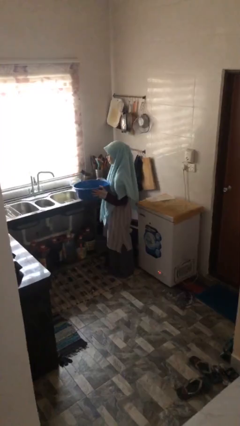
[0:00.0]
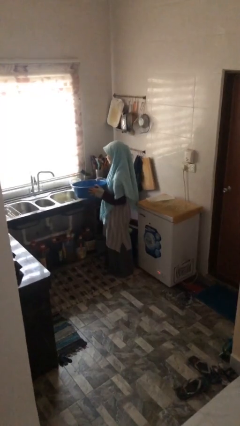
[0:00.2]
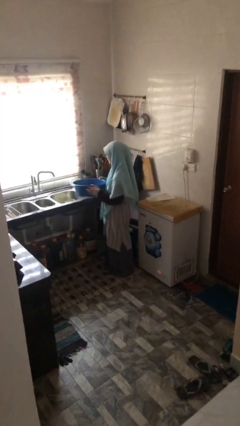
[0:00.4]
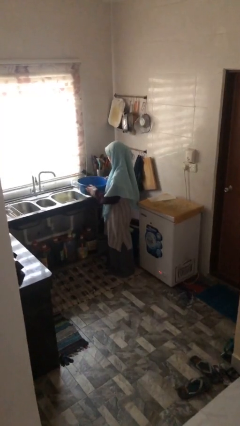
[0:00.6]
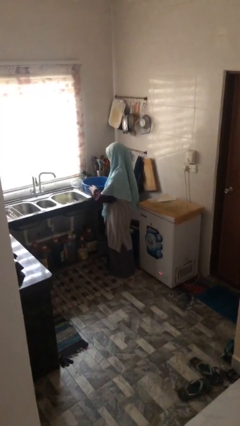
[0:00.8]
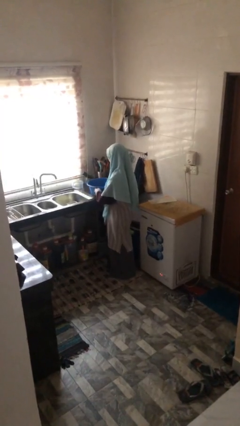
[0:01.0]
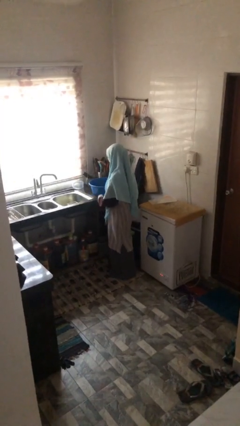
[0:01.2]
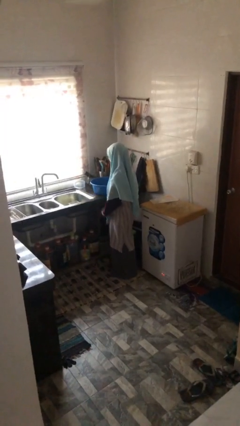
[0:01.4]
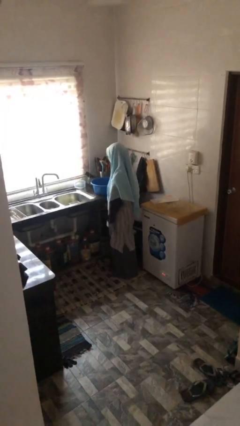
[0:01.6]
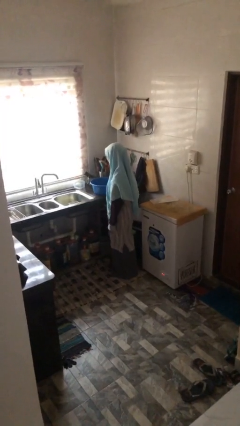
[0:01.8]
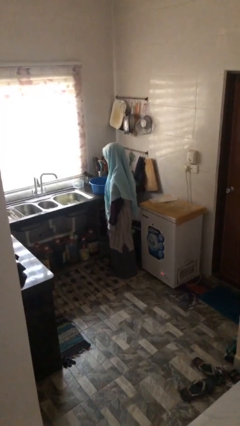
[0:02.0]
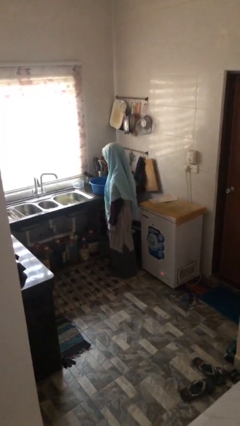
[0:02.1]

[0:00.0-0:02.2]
person puts down object on countertop

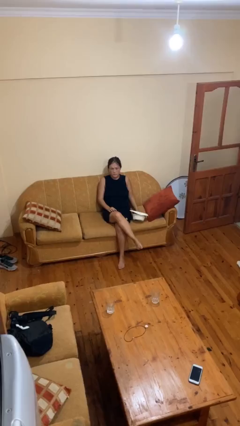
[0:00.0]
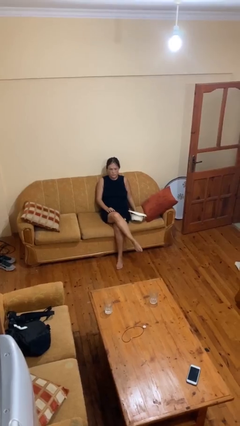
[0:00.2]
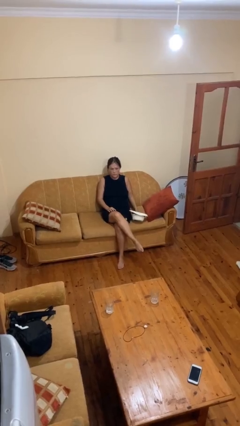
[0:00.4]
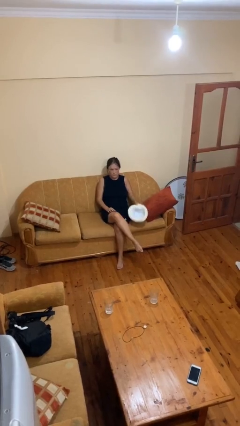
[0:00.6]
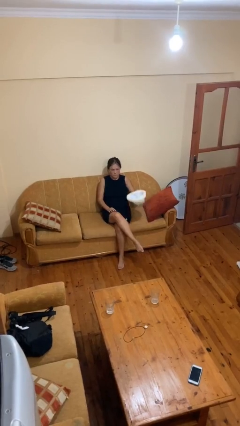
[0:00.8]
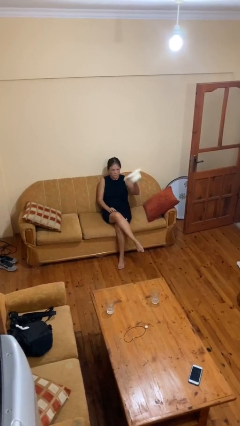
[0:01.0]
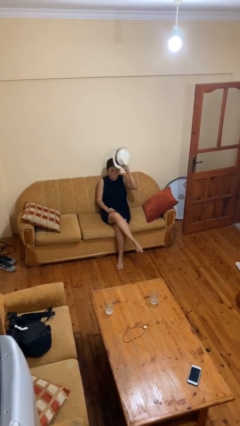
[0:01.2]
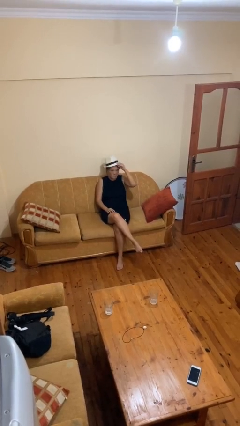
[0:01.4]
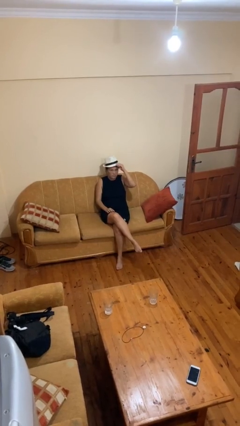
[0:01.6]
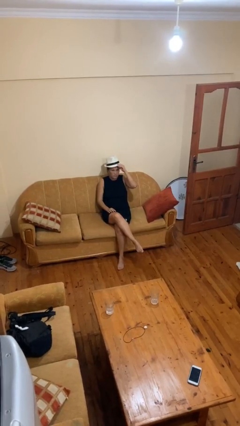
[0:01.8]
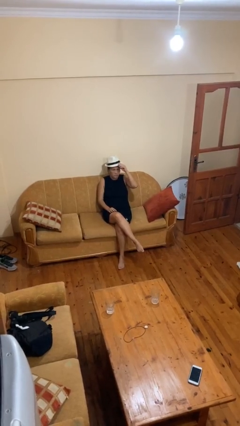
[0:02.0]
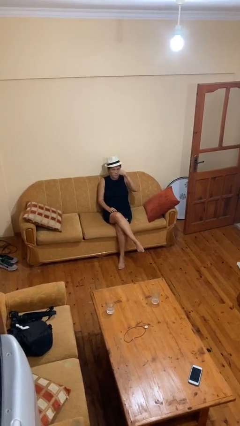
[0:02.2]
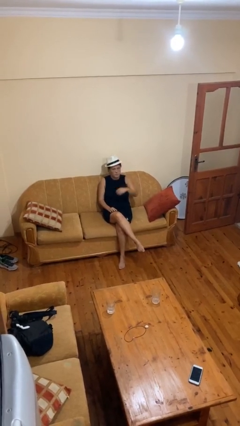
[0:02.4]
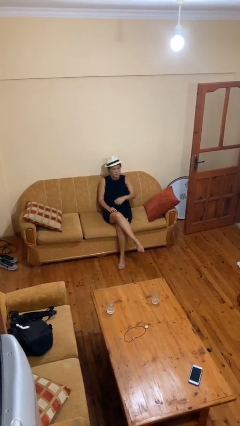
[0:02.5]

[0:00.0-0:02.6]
person puts on hat

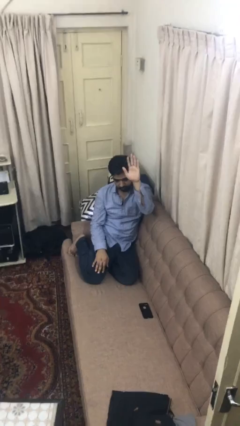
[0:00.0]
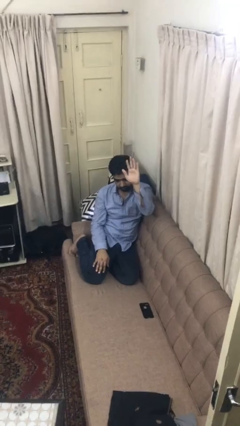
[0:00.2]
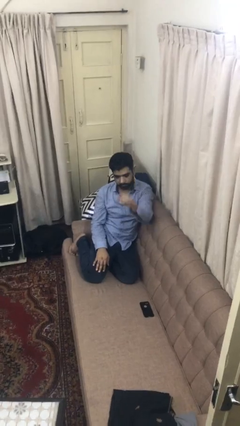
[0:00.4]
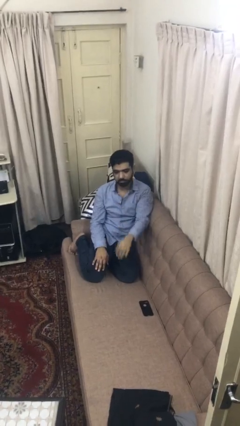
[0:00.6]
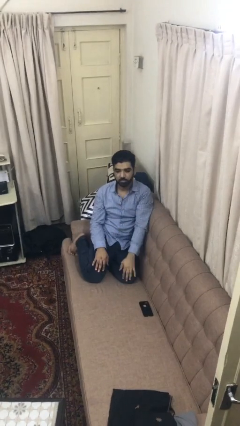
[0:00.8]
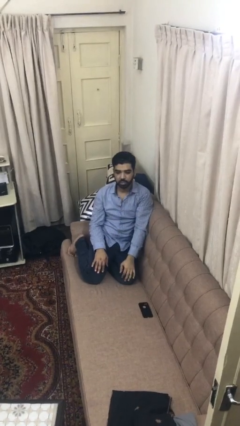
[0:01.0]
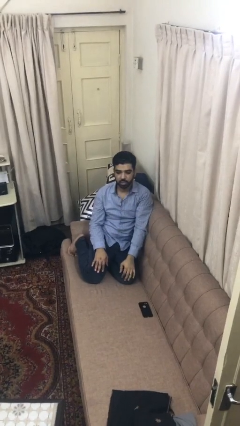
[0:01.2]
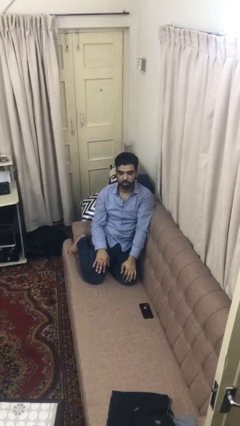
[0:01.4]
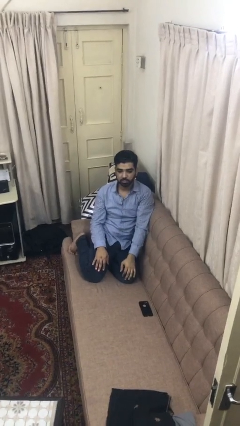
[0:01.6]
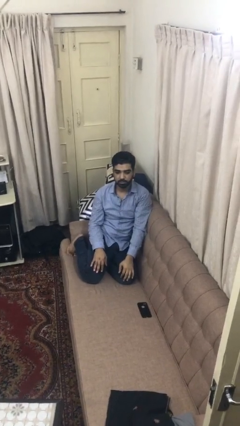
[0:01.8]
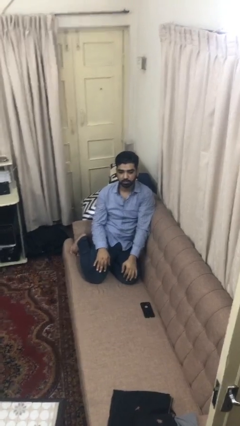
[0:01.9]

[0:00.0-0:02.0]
person gestures lower hand

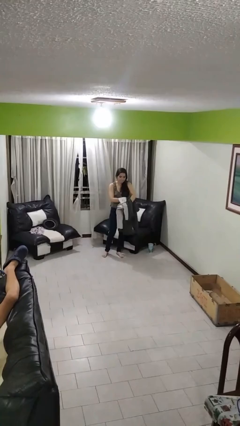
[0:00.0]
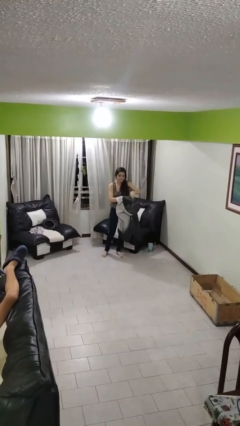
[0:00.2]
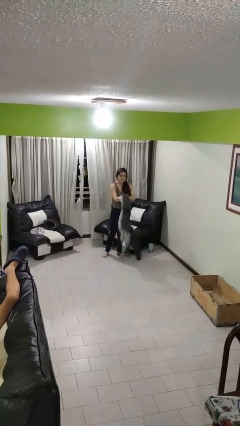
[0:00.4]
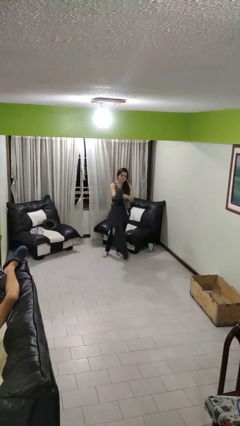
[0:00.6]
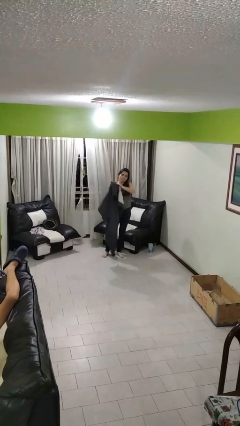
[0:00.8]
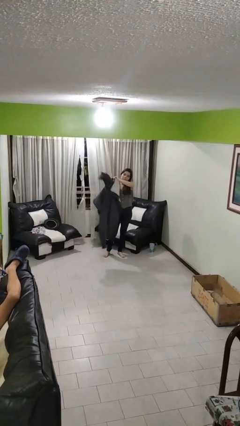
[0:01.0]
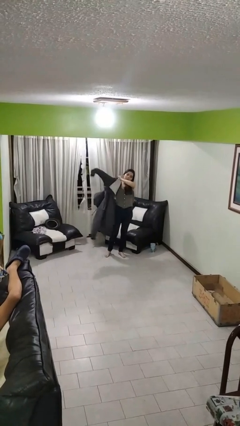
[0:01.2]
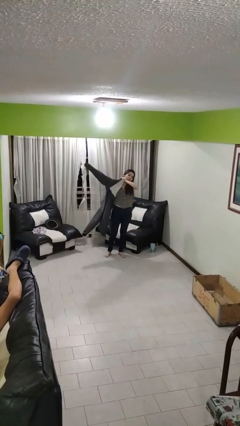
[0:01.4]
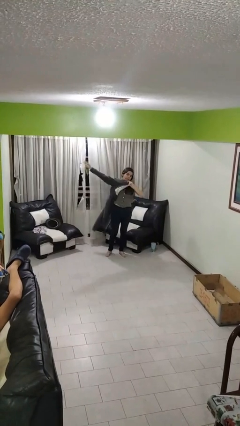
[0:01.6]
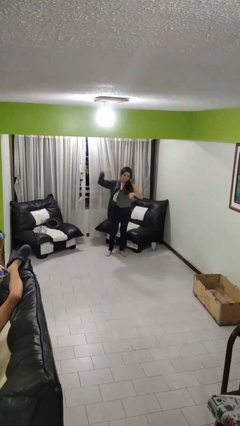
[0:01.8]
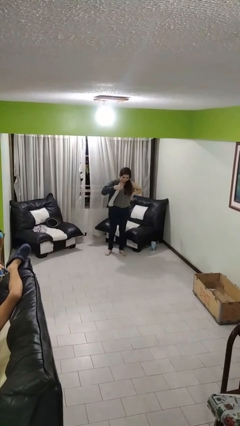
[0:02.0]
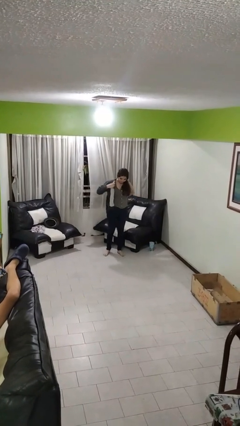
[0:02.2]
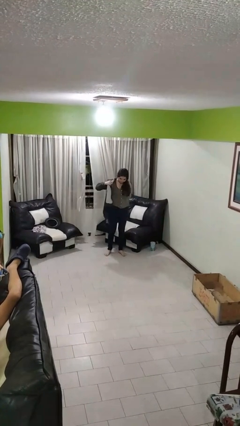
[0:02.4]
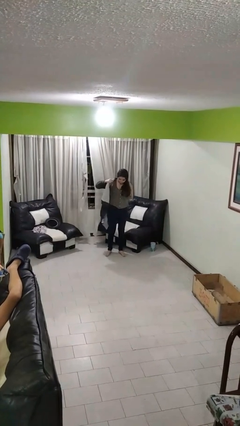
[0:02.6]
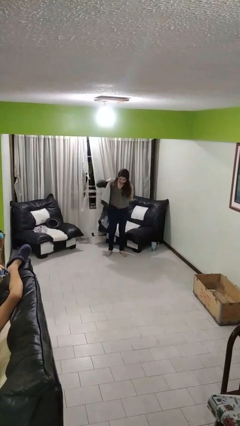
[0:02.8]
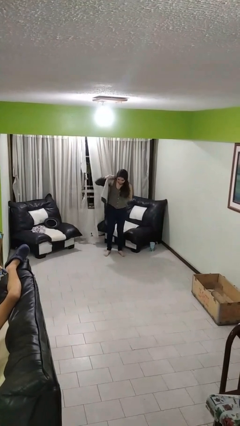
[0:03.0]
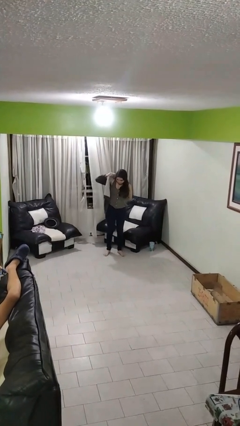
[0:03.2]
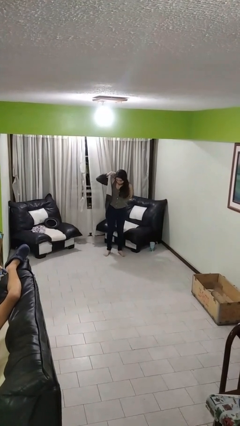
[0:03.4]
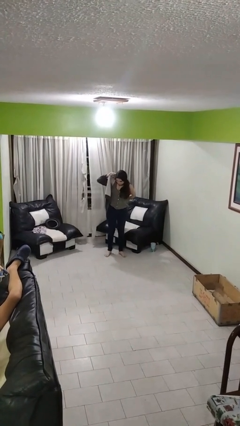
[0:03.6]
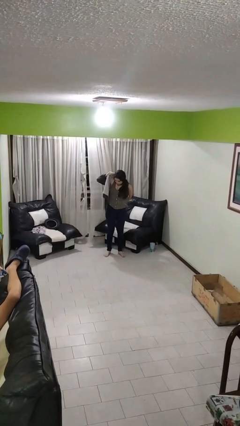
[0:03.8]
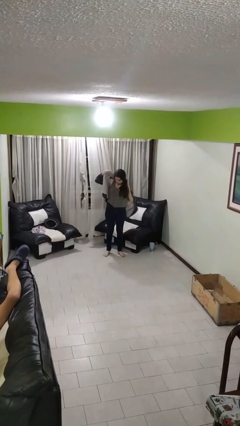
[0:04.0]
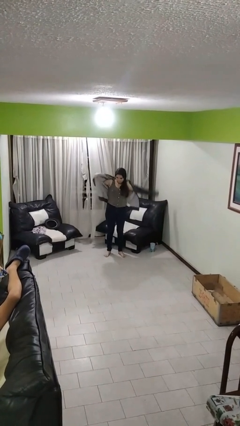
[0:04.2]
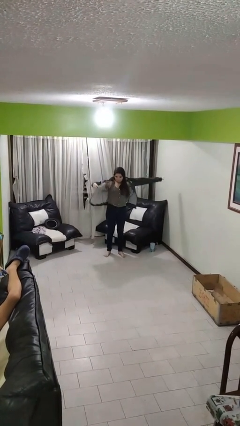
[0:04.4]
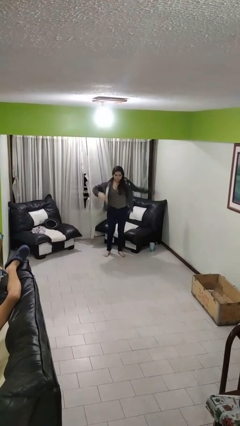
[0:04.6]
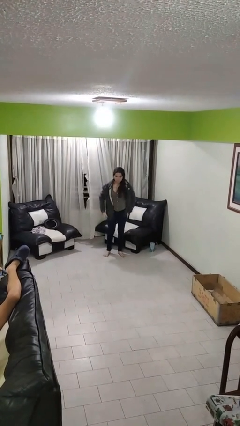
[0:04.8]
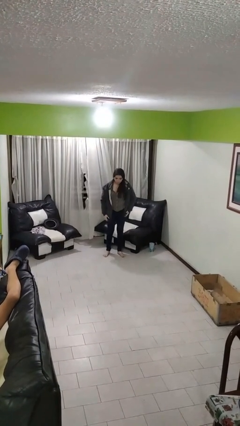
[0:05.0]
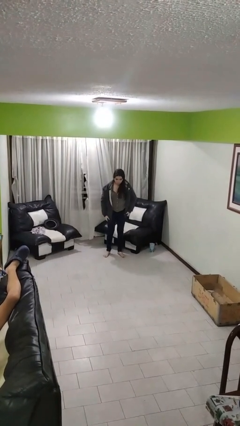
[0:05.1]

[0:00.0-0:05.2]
person puts on jacket

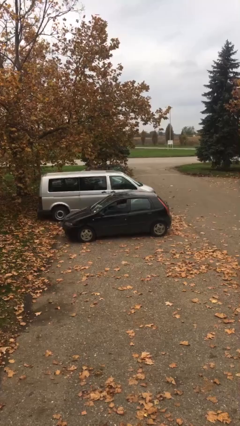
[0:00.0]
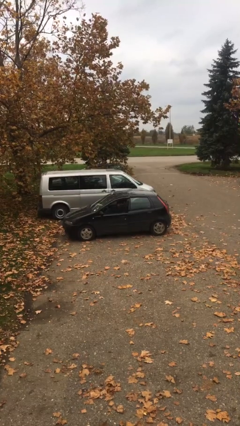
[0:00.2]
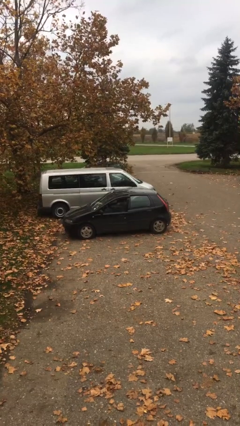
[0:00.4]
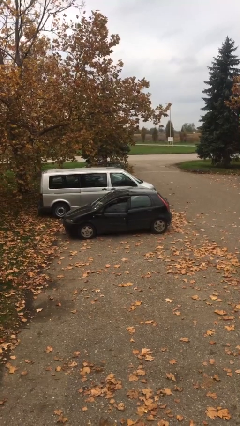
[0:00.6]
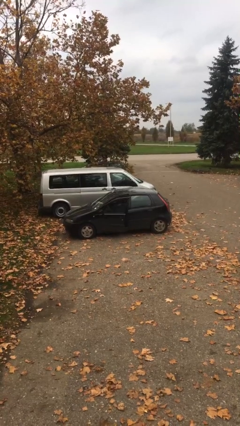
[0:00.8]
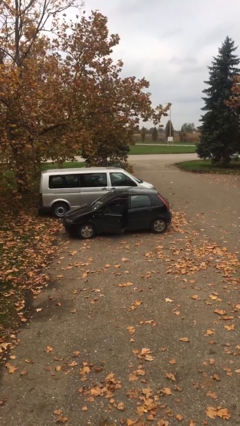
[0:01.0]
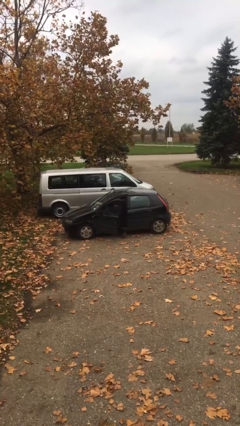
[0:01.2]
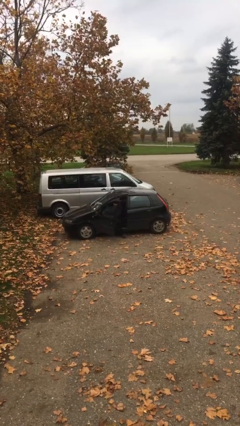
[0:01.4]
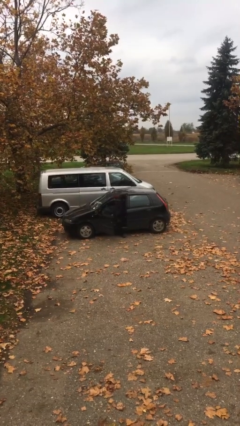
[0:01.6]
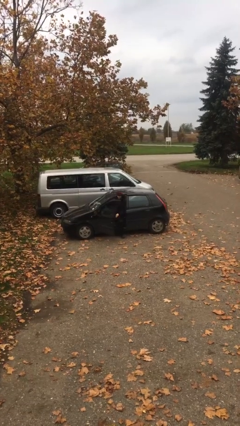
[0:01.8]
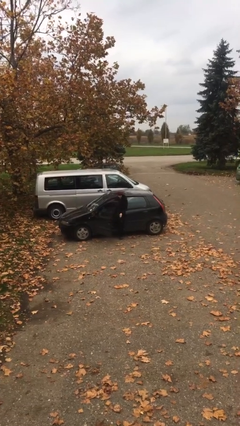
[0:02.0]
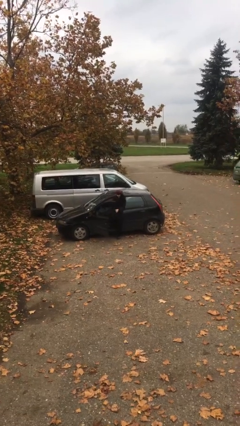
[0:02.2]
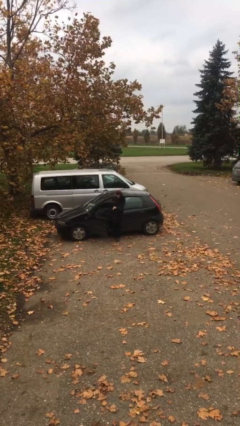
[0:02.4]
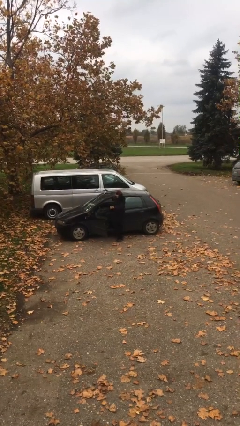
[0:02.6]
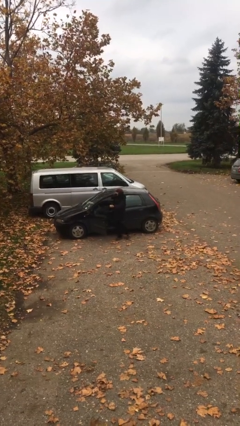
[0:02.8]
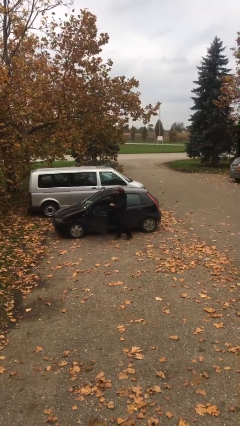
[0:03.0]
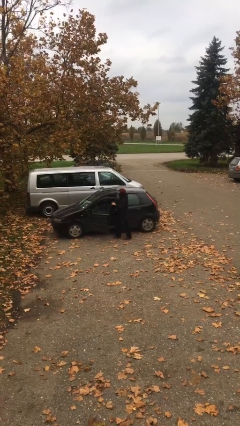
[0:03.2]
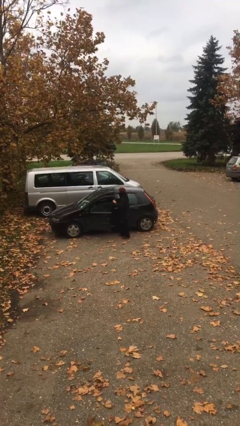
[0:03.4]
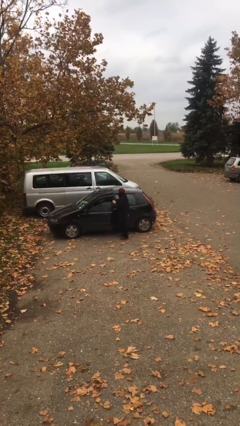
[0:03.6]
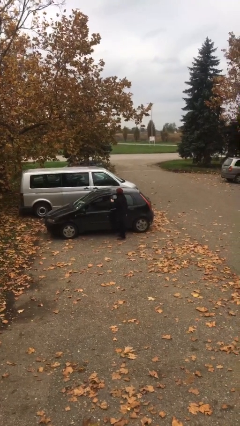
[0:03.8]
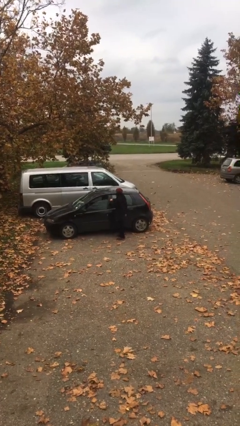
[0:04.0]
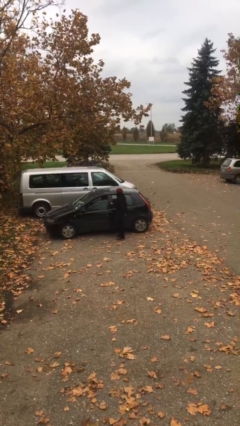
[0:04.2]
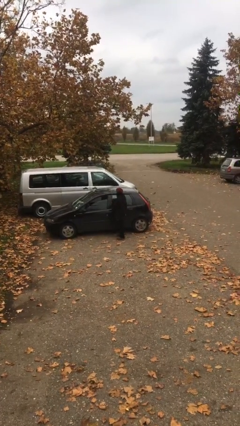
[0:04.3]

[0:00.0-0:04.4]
person exits car

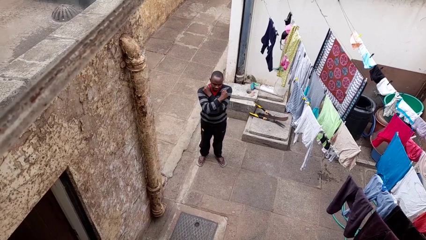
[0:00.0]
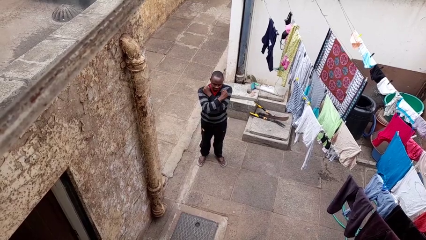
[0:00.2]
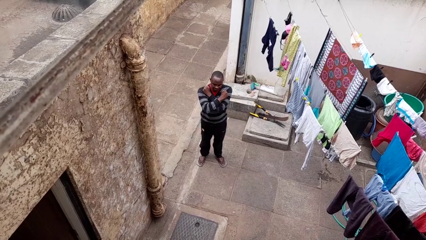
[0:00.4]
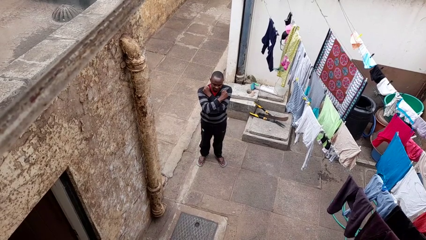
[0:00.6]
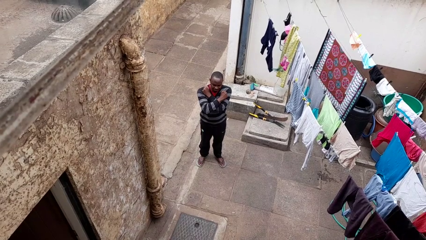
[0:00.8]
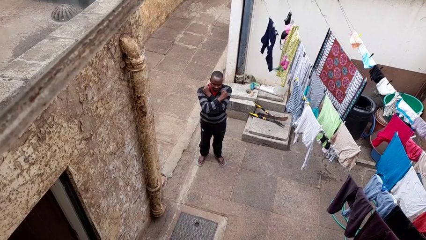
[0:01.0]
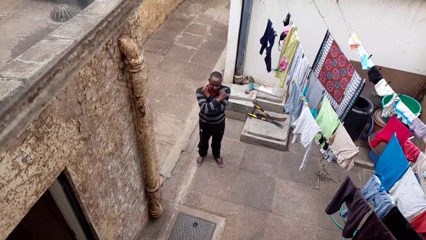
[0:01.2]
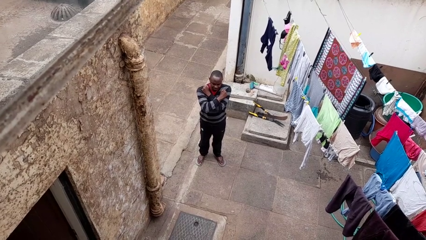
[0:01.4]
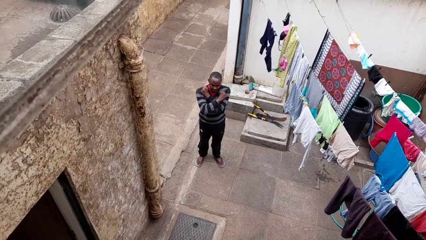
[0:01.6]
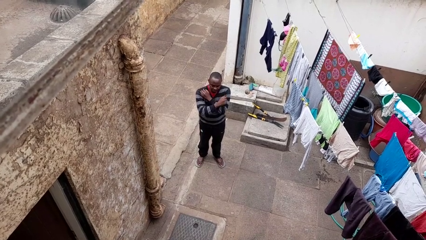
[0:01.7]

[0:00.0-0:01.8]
person gestures arms x
